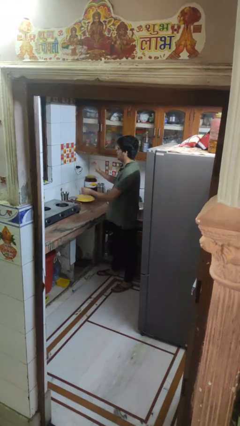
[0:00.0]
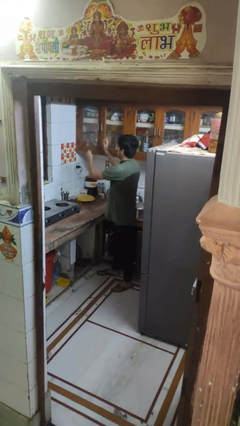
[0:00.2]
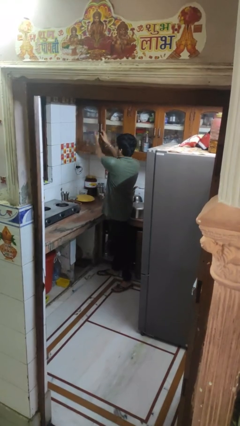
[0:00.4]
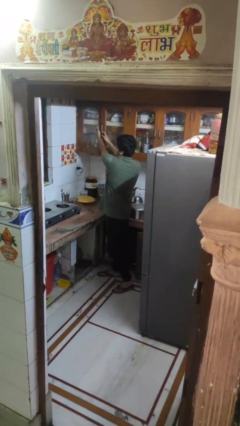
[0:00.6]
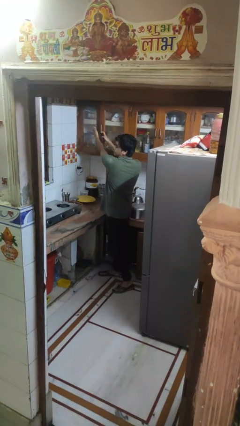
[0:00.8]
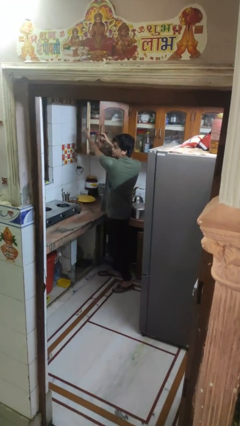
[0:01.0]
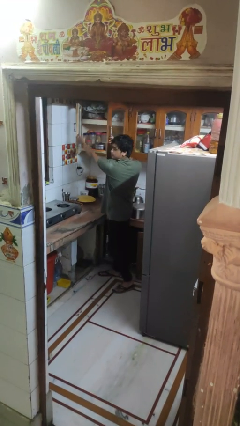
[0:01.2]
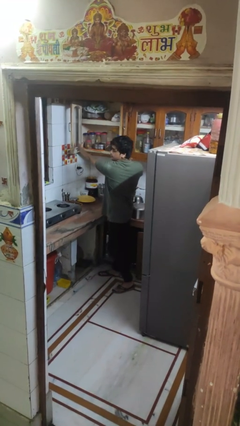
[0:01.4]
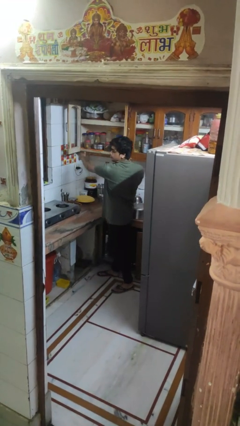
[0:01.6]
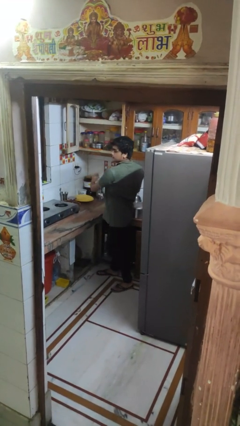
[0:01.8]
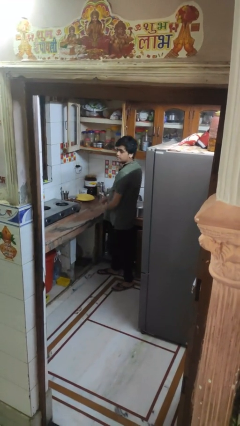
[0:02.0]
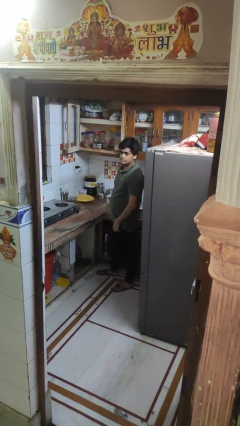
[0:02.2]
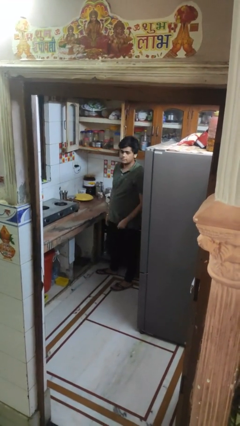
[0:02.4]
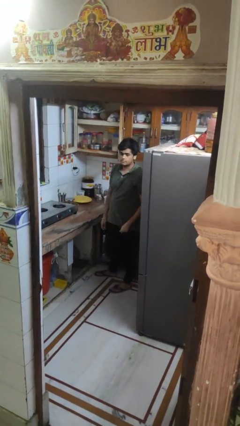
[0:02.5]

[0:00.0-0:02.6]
person opens cabinet

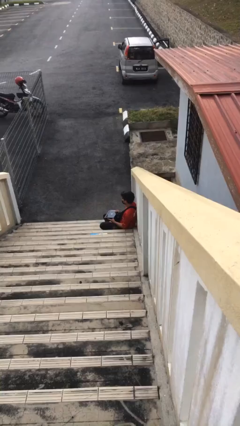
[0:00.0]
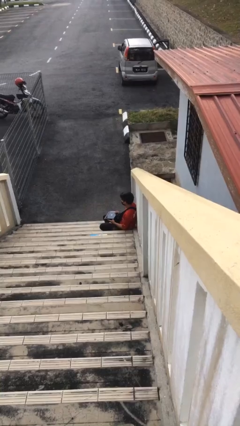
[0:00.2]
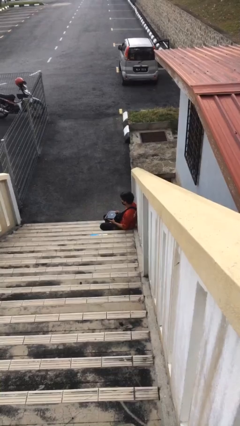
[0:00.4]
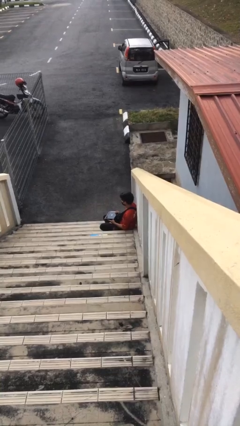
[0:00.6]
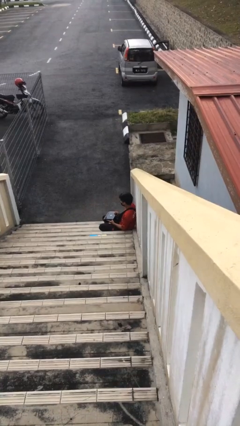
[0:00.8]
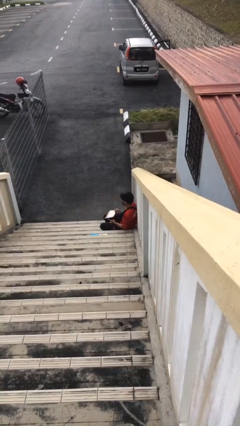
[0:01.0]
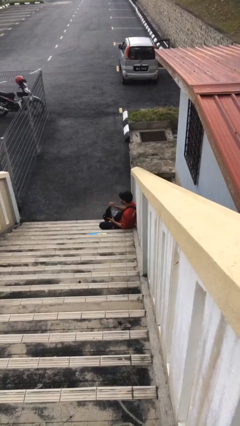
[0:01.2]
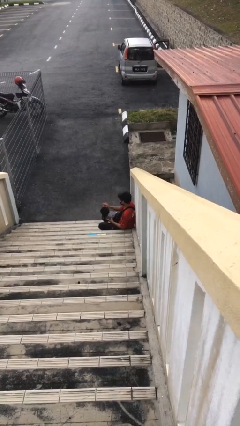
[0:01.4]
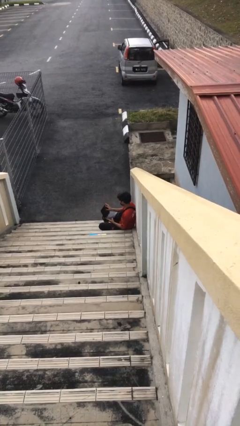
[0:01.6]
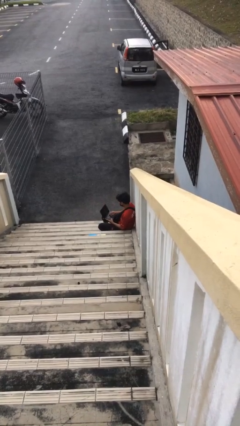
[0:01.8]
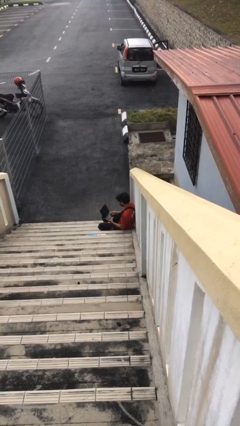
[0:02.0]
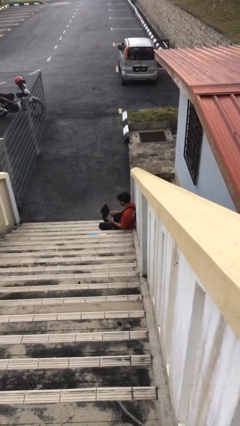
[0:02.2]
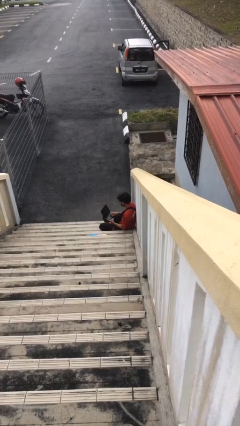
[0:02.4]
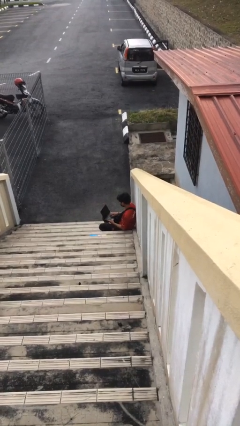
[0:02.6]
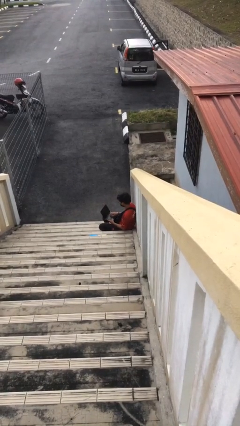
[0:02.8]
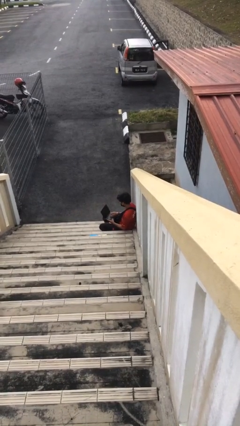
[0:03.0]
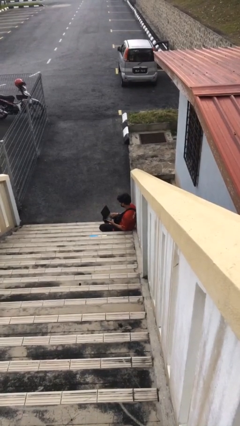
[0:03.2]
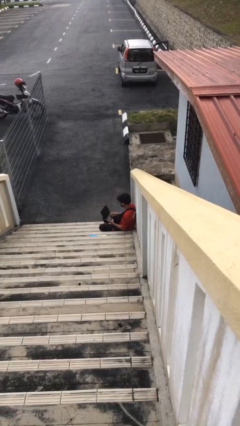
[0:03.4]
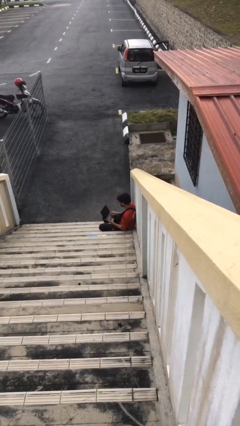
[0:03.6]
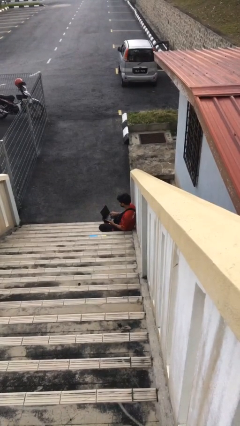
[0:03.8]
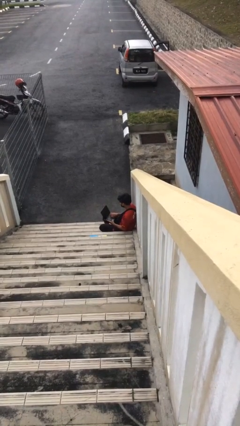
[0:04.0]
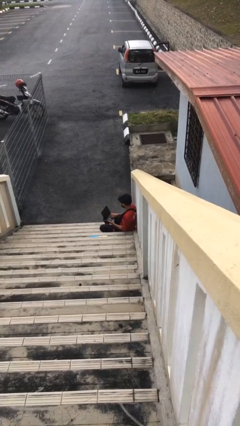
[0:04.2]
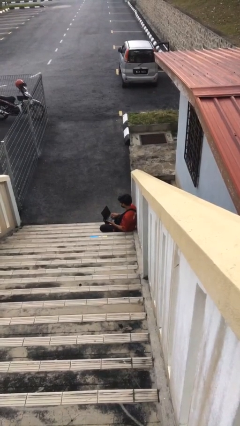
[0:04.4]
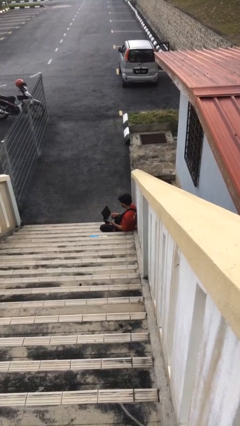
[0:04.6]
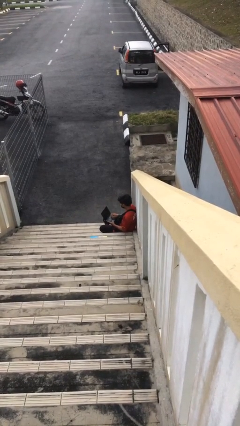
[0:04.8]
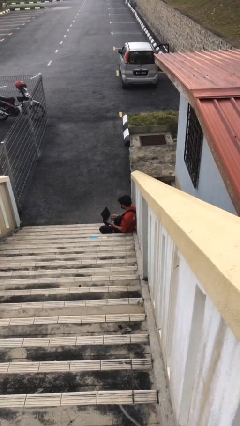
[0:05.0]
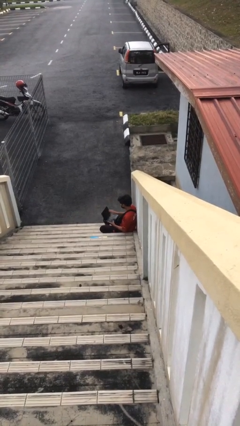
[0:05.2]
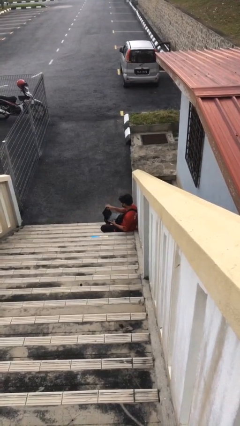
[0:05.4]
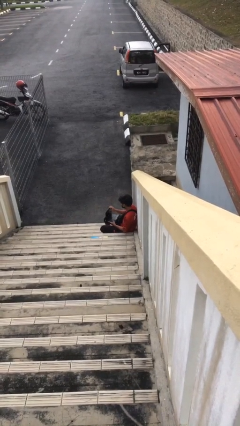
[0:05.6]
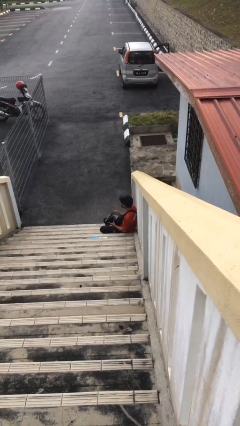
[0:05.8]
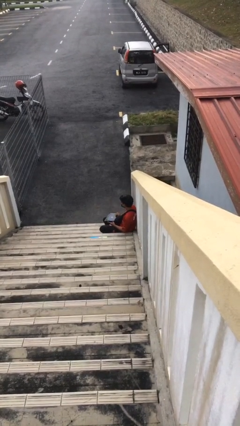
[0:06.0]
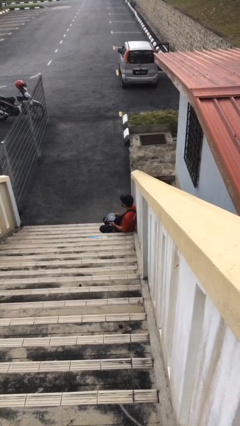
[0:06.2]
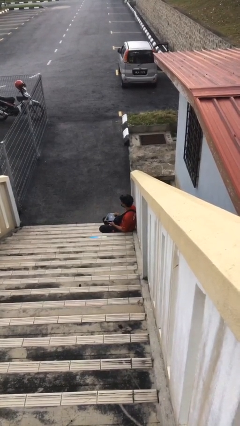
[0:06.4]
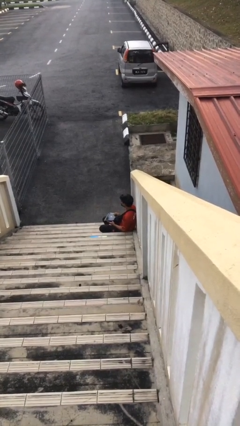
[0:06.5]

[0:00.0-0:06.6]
person interacts with laptop

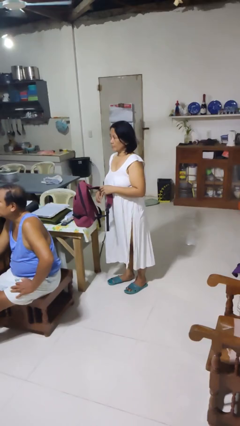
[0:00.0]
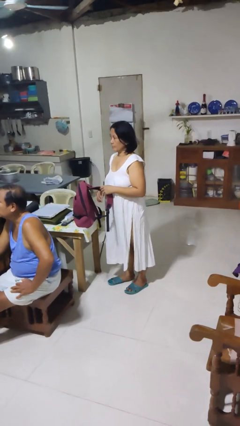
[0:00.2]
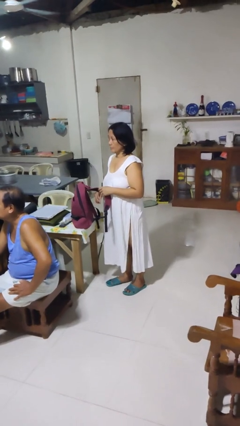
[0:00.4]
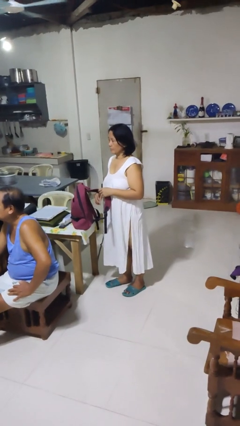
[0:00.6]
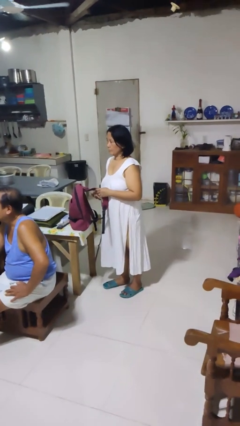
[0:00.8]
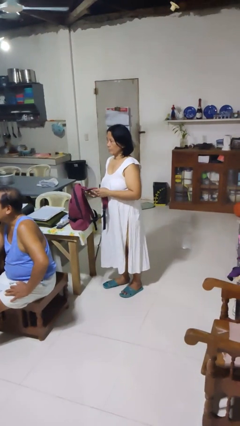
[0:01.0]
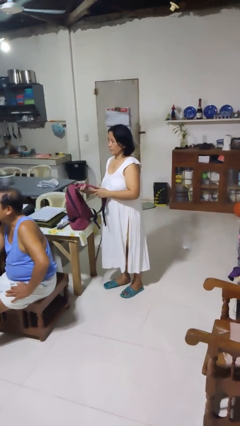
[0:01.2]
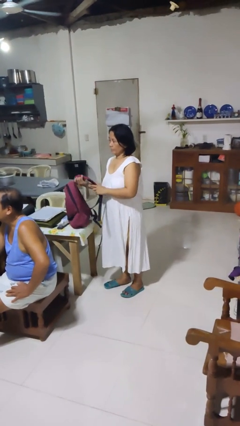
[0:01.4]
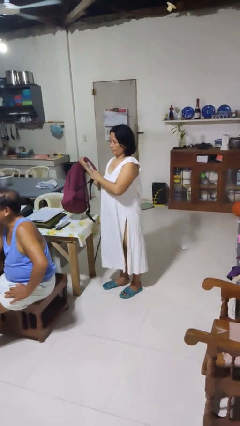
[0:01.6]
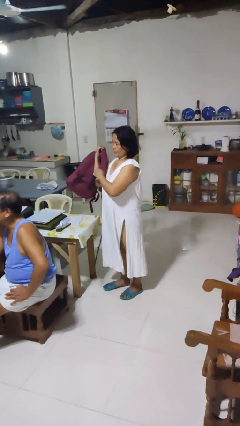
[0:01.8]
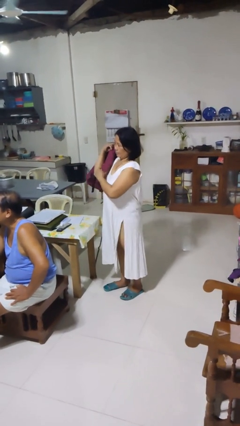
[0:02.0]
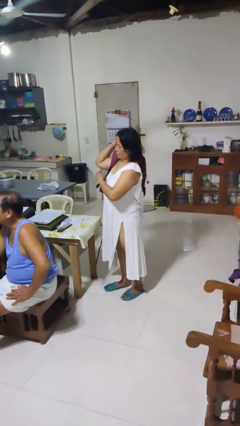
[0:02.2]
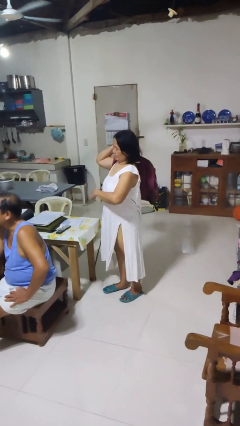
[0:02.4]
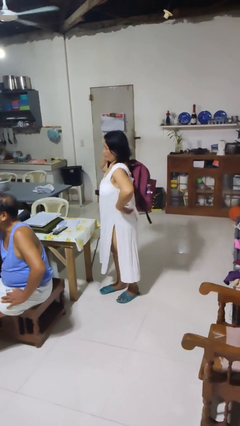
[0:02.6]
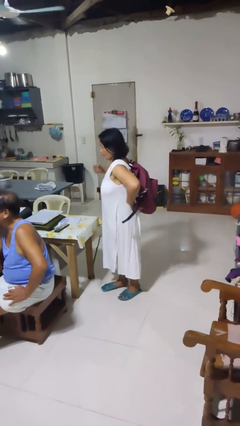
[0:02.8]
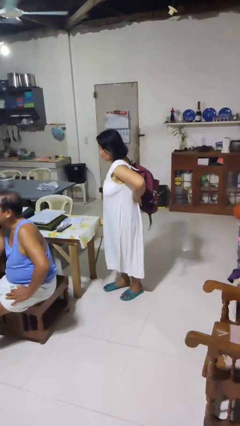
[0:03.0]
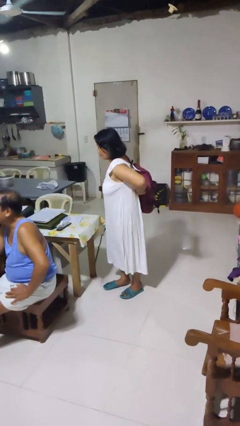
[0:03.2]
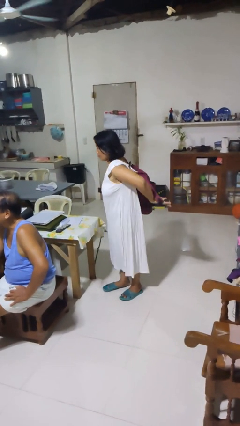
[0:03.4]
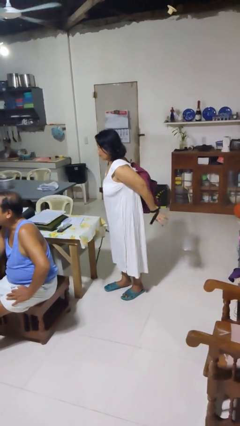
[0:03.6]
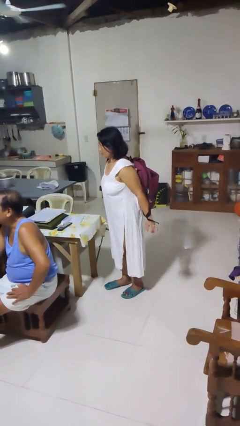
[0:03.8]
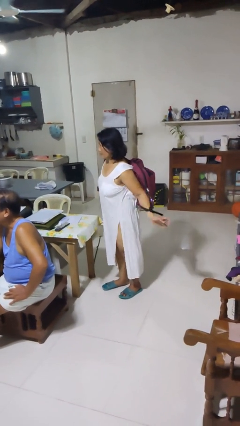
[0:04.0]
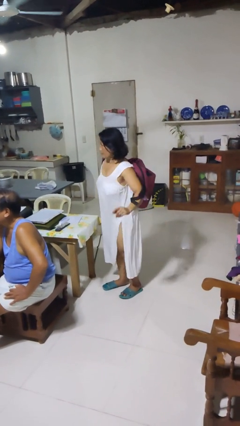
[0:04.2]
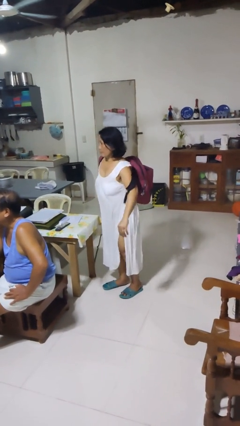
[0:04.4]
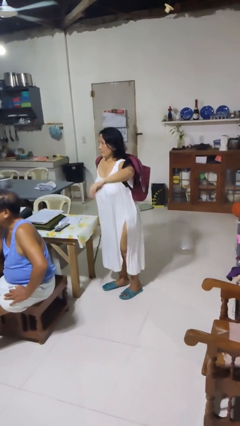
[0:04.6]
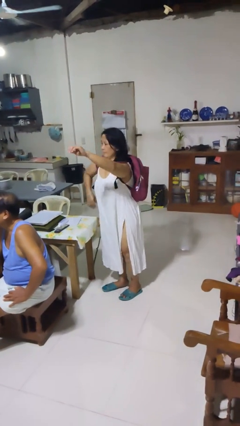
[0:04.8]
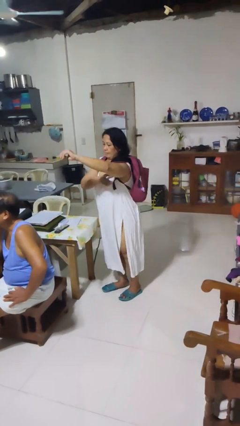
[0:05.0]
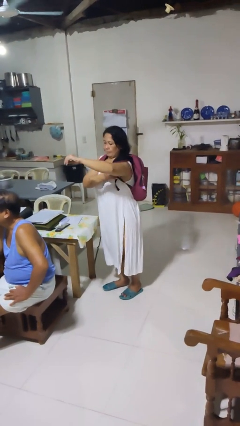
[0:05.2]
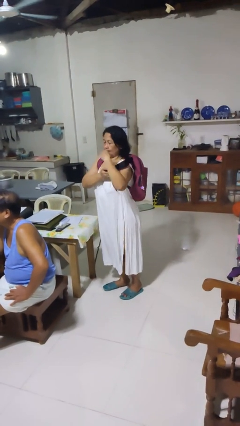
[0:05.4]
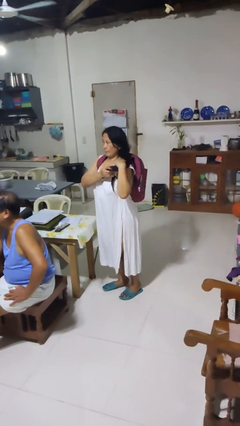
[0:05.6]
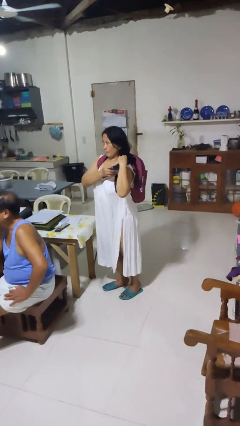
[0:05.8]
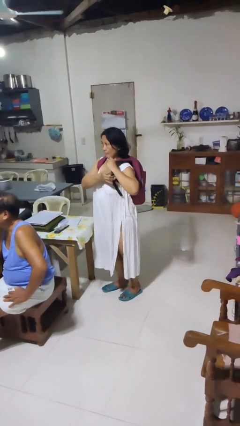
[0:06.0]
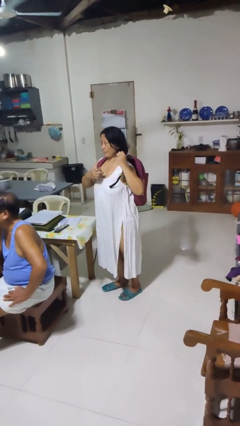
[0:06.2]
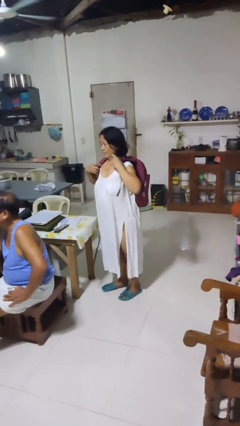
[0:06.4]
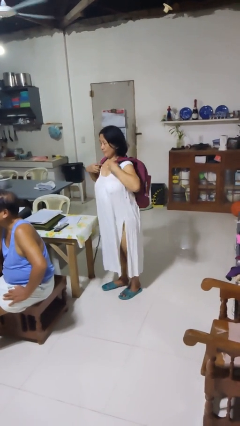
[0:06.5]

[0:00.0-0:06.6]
person puts on backpack

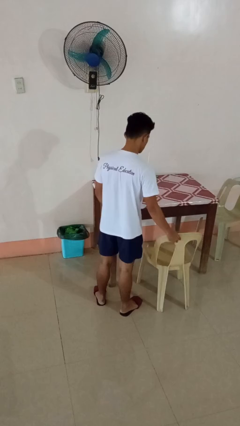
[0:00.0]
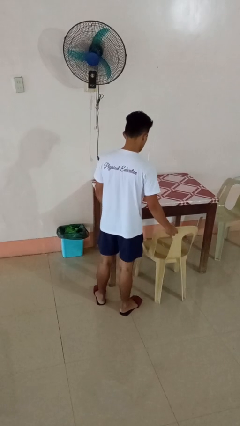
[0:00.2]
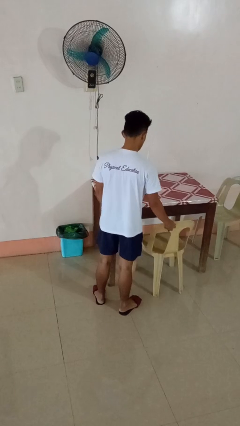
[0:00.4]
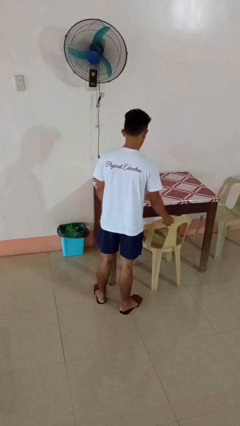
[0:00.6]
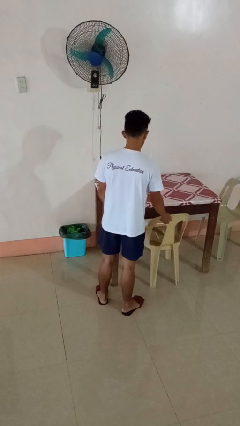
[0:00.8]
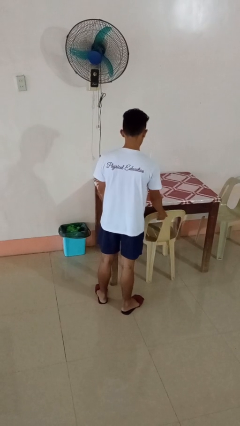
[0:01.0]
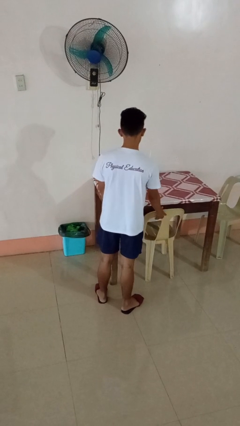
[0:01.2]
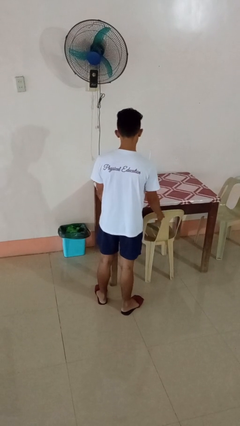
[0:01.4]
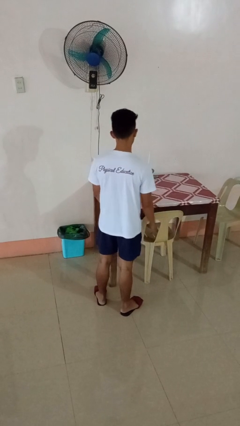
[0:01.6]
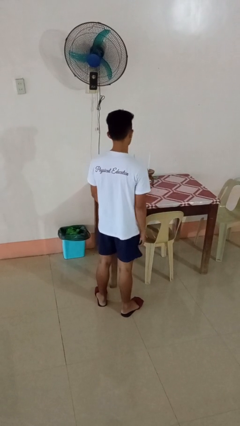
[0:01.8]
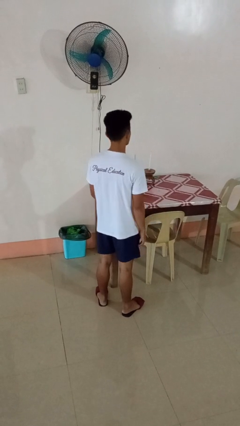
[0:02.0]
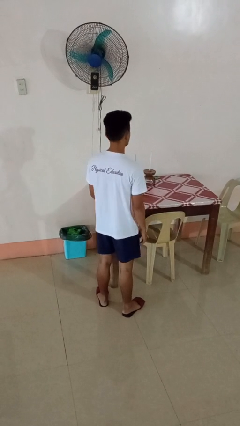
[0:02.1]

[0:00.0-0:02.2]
person pushes in chair

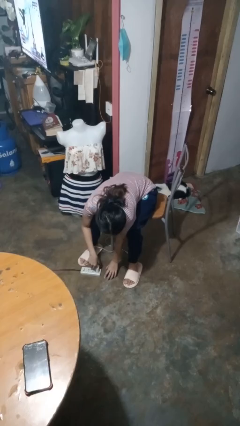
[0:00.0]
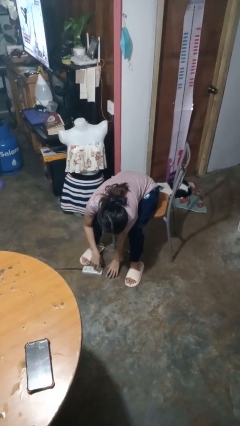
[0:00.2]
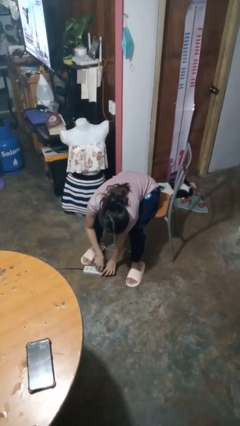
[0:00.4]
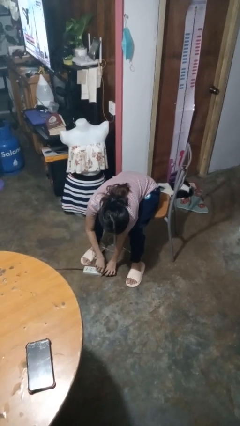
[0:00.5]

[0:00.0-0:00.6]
person unplugs from electrical socket
